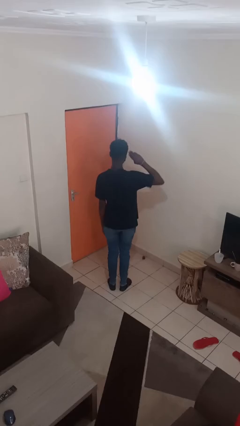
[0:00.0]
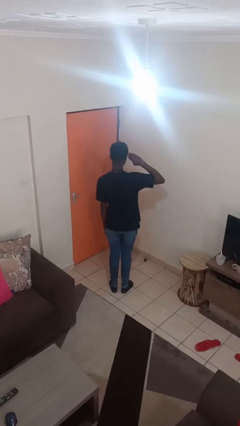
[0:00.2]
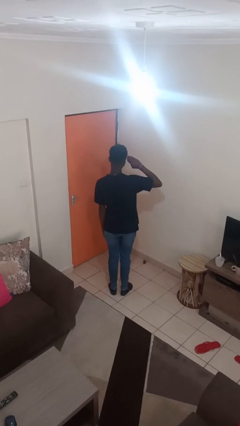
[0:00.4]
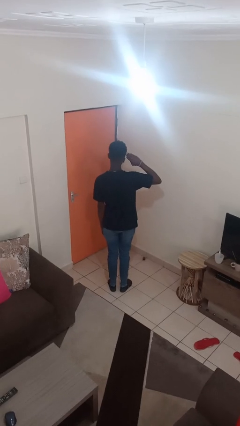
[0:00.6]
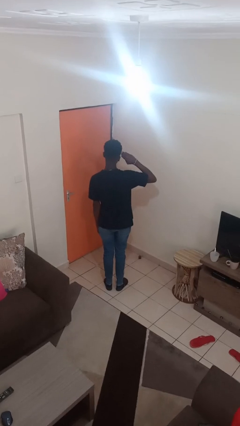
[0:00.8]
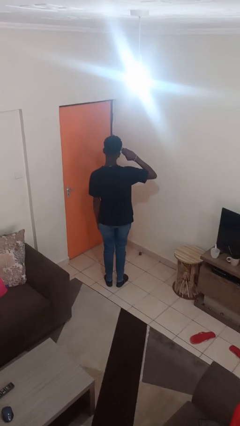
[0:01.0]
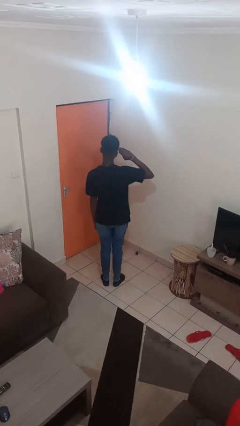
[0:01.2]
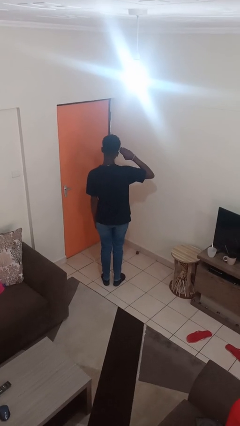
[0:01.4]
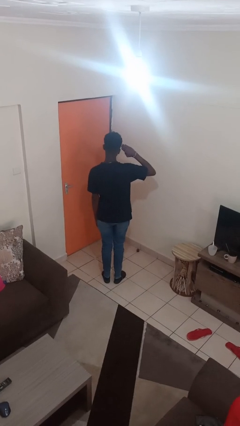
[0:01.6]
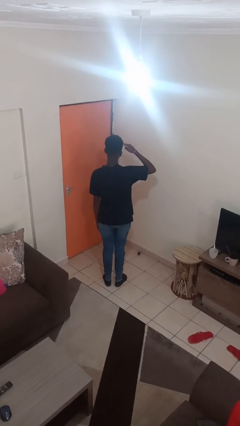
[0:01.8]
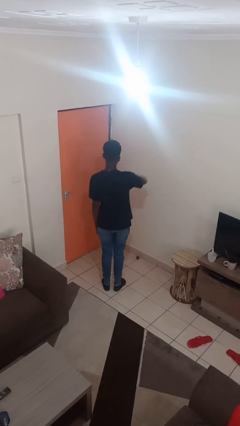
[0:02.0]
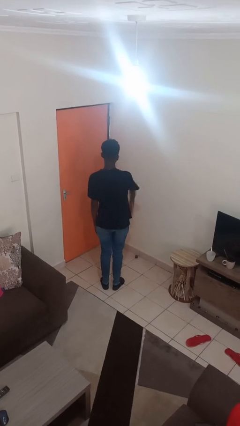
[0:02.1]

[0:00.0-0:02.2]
person salutes

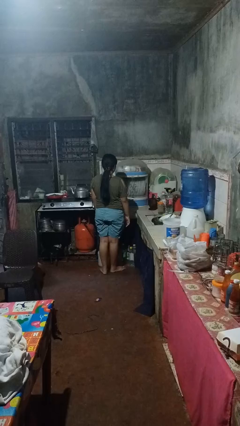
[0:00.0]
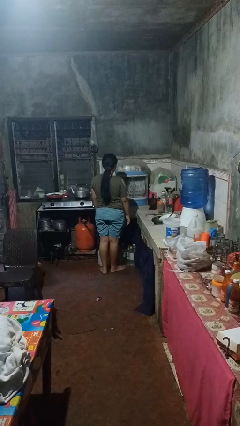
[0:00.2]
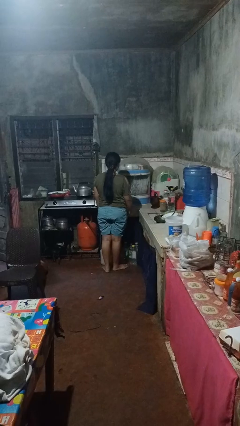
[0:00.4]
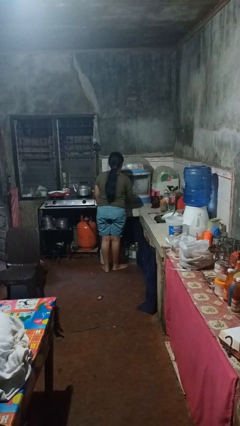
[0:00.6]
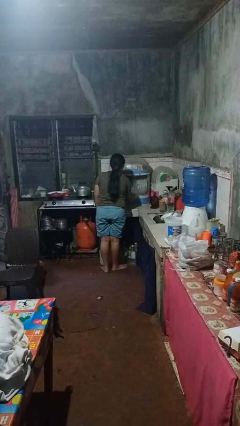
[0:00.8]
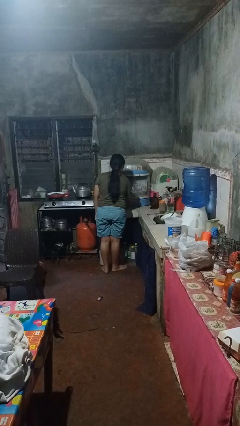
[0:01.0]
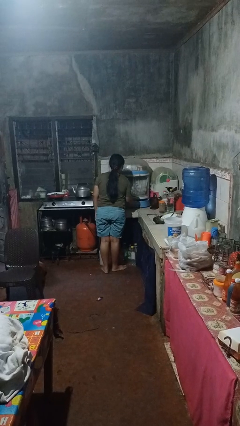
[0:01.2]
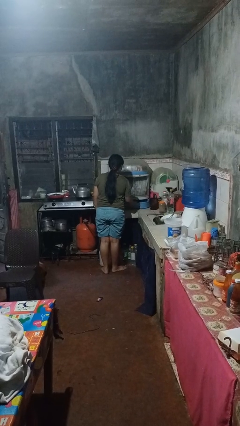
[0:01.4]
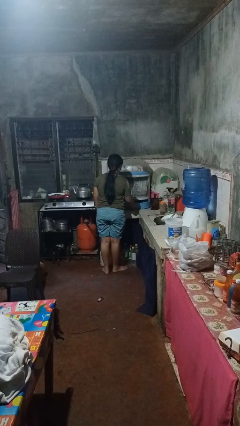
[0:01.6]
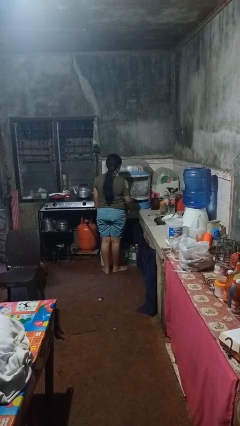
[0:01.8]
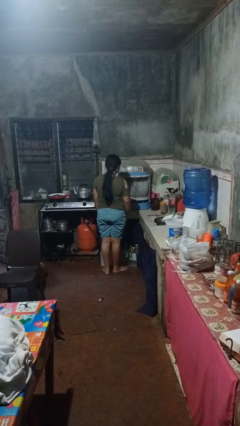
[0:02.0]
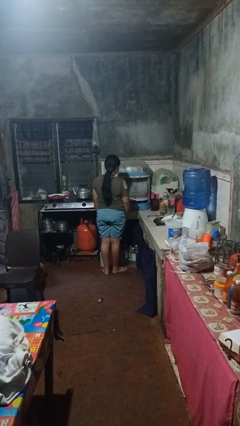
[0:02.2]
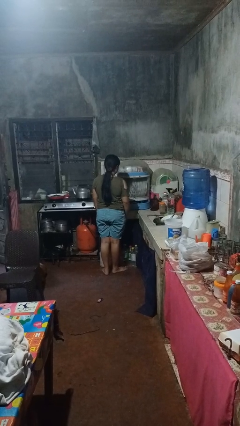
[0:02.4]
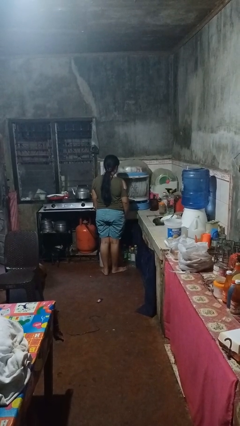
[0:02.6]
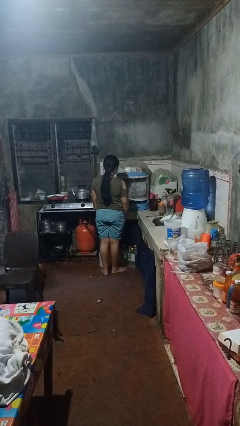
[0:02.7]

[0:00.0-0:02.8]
person opens kitchen drawer

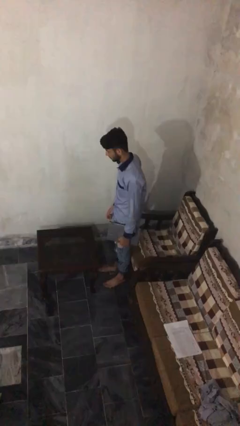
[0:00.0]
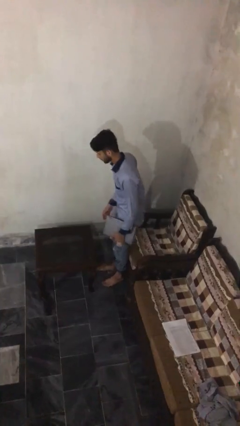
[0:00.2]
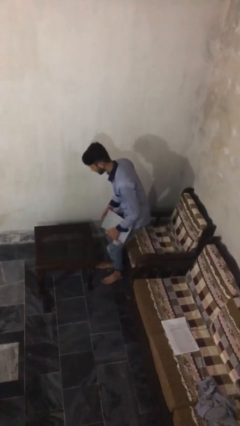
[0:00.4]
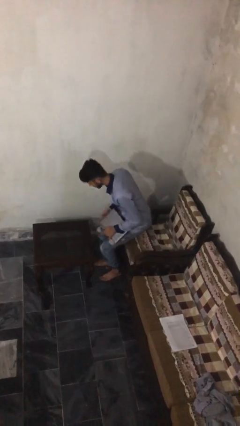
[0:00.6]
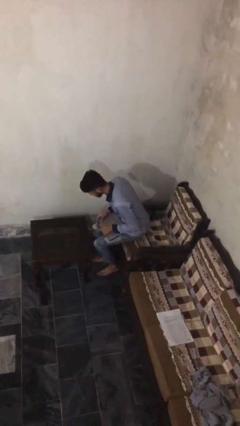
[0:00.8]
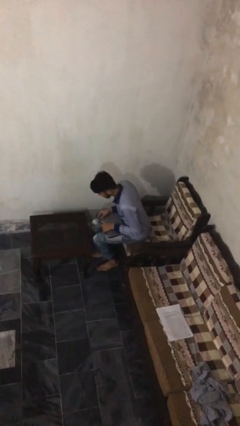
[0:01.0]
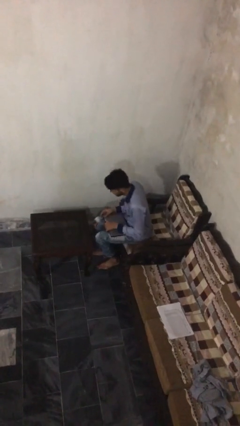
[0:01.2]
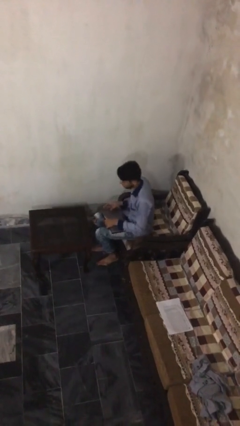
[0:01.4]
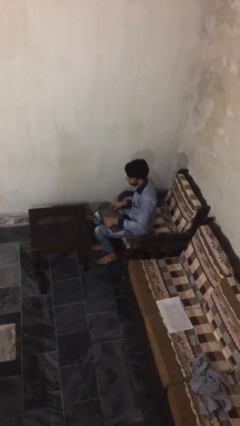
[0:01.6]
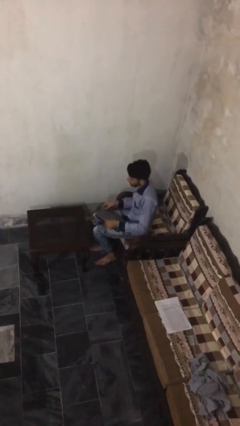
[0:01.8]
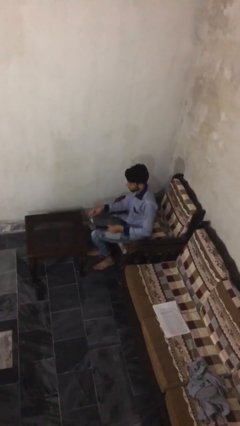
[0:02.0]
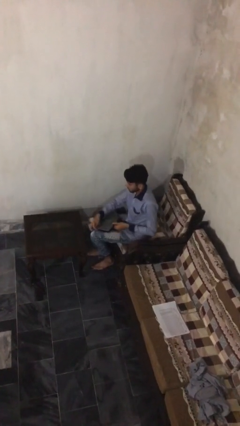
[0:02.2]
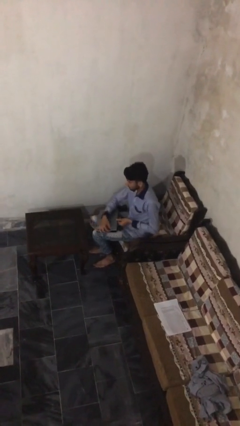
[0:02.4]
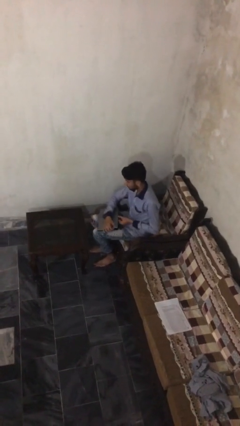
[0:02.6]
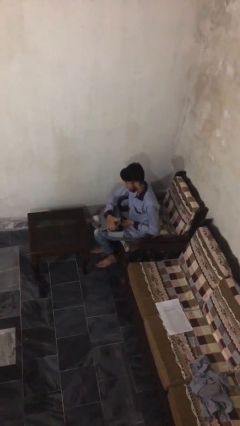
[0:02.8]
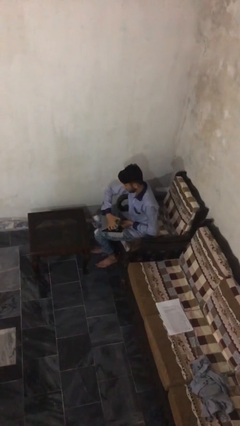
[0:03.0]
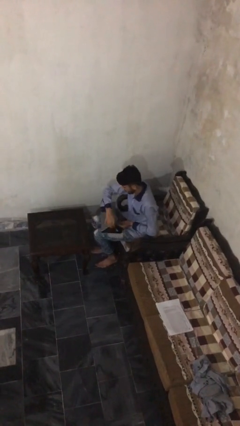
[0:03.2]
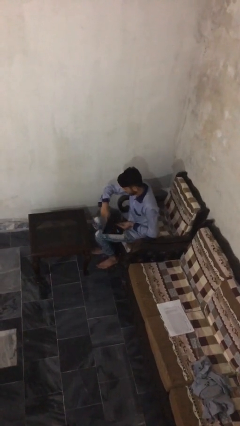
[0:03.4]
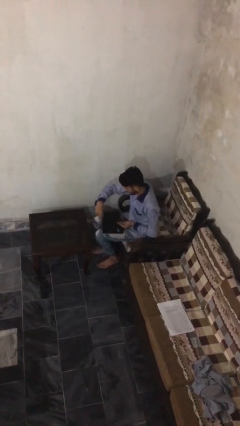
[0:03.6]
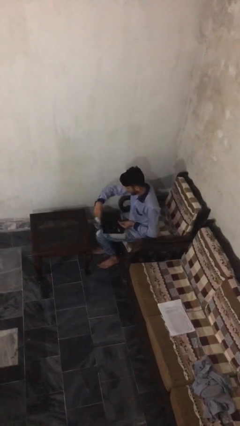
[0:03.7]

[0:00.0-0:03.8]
person sits down

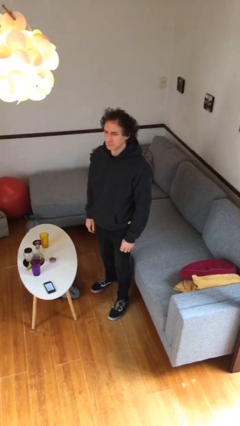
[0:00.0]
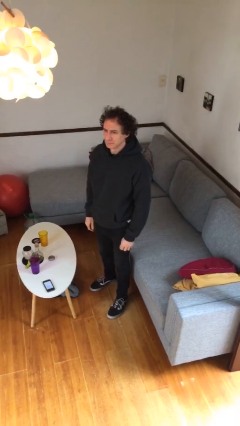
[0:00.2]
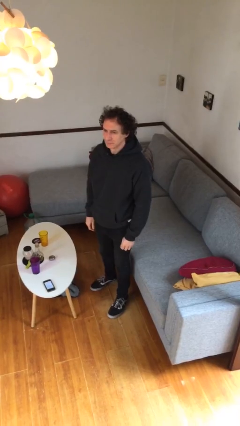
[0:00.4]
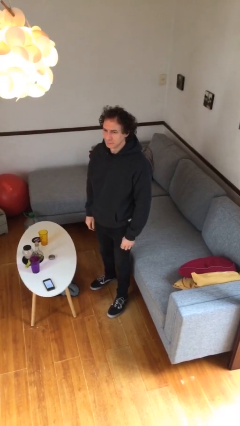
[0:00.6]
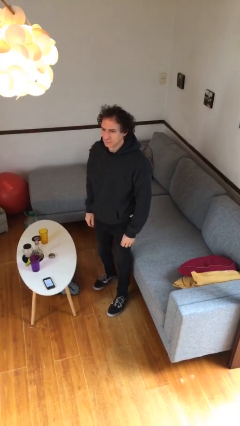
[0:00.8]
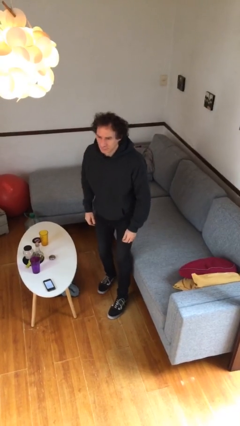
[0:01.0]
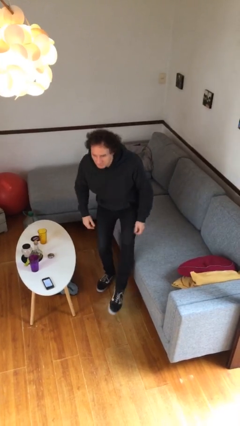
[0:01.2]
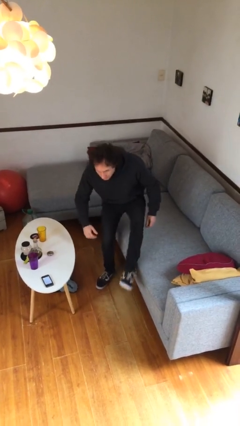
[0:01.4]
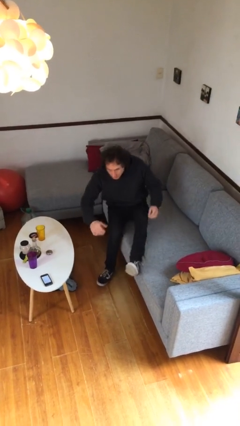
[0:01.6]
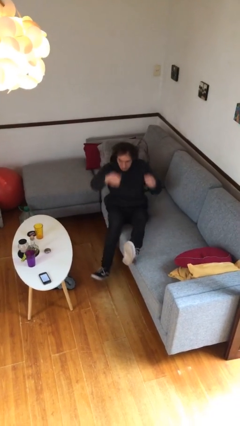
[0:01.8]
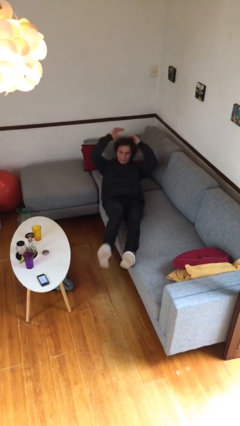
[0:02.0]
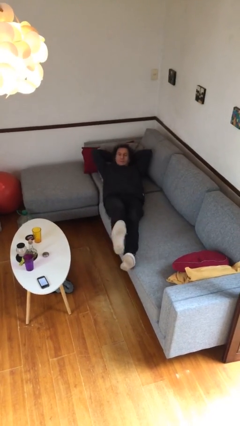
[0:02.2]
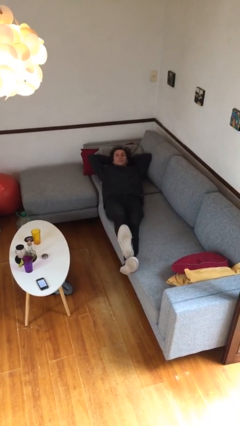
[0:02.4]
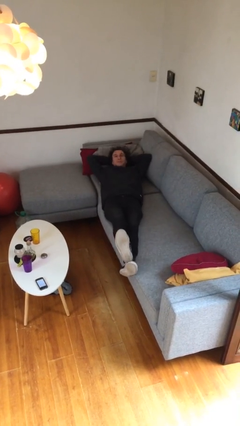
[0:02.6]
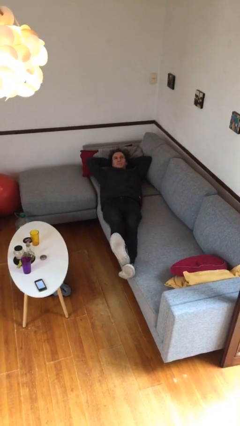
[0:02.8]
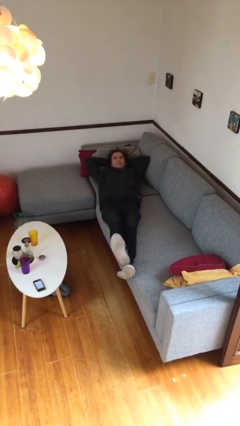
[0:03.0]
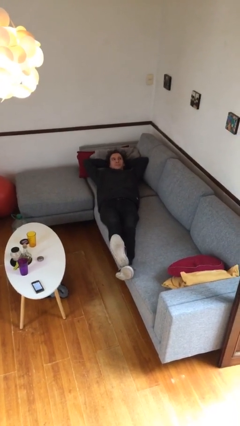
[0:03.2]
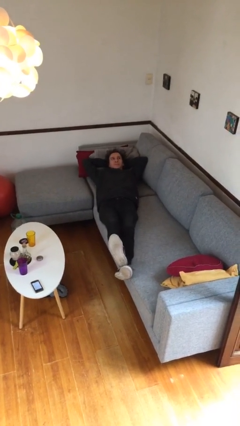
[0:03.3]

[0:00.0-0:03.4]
person lies down on couch

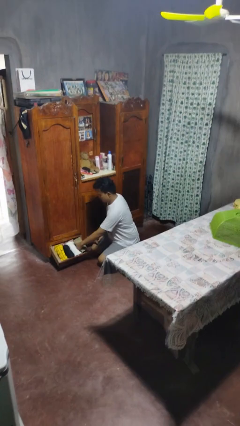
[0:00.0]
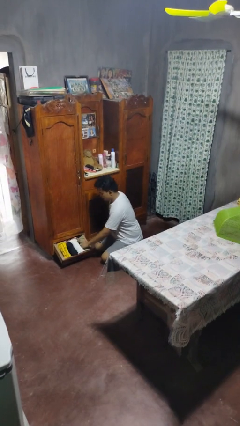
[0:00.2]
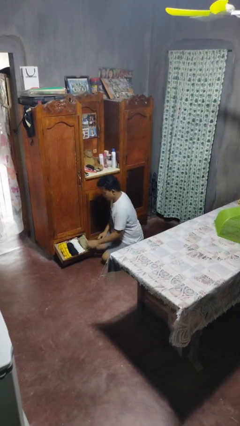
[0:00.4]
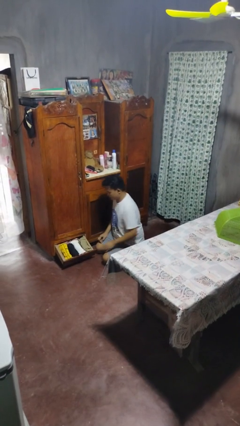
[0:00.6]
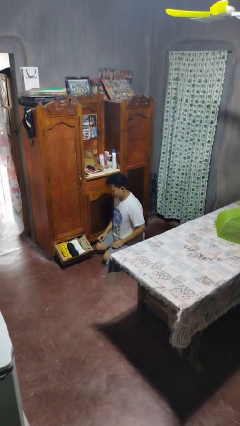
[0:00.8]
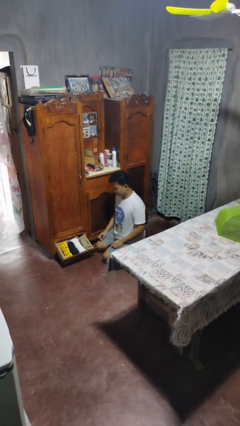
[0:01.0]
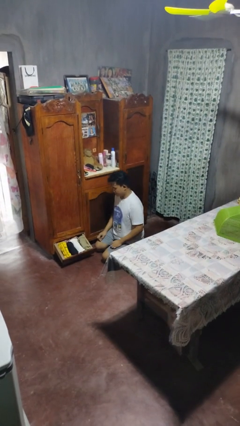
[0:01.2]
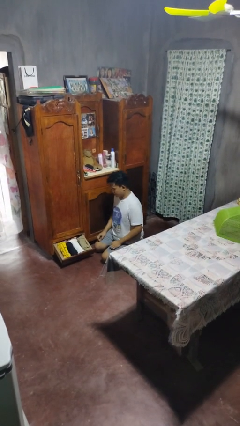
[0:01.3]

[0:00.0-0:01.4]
person puts clothes into dresser

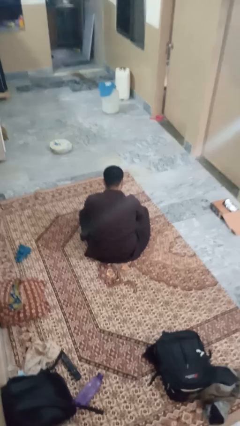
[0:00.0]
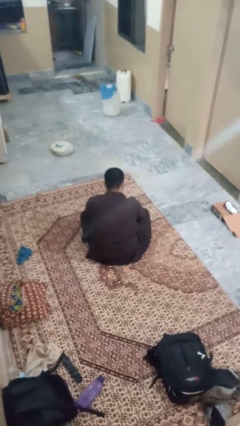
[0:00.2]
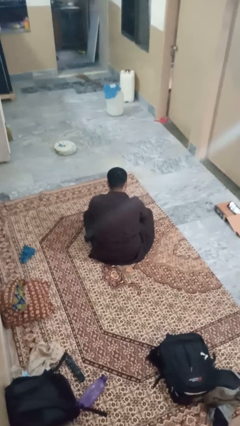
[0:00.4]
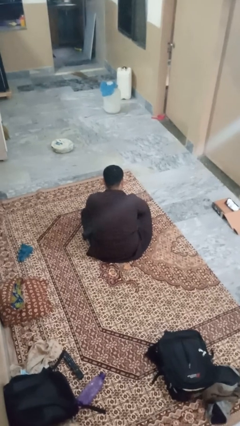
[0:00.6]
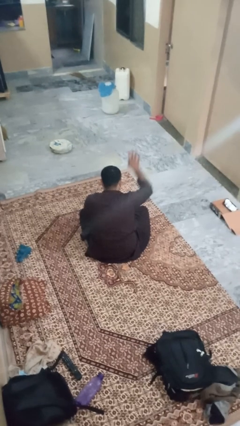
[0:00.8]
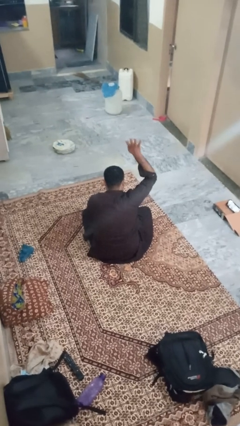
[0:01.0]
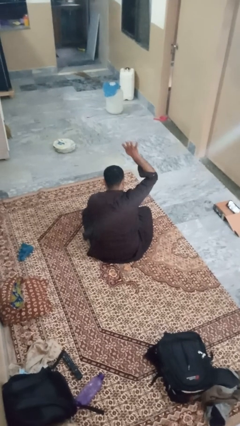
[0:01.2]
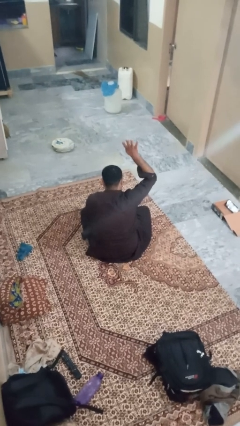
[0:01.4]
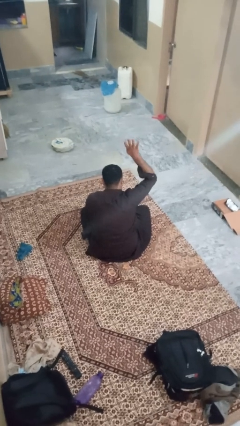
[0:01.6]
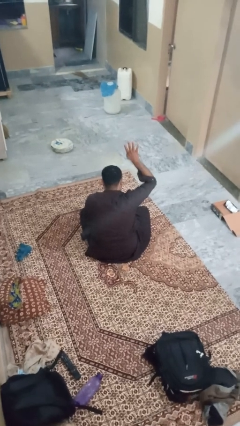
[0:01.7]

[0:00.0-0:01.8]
person gestures number four

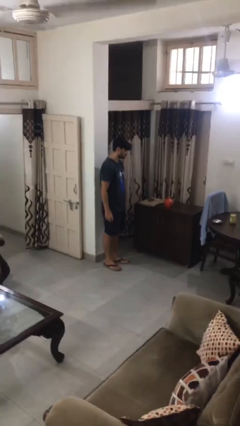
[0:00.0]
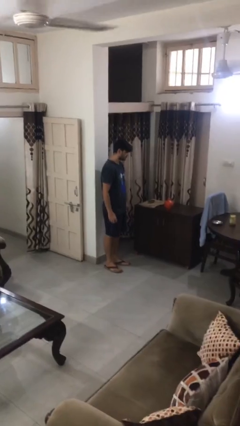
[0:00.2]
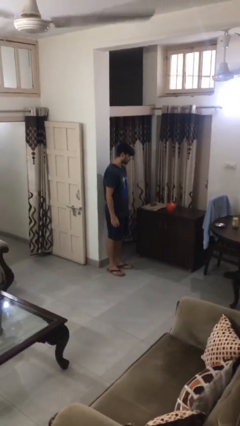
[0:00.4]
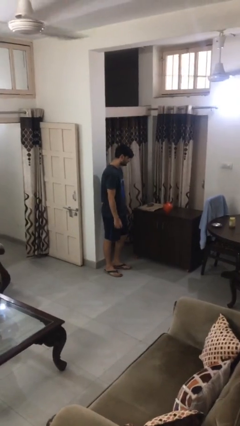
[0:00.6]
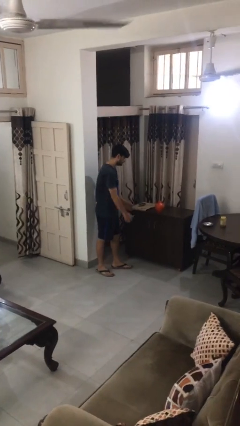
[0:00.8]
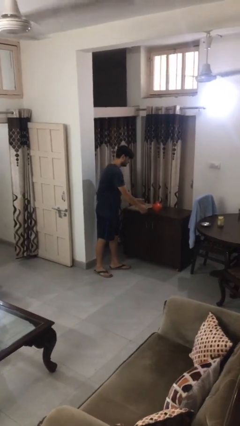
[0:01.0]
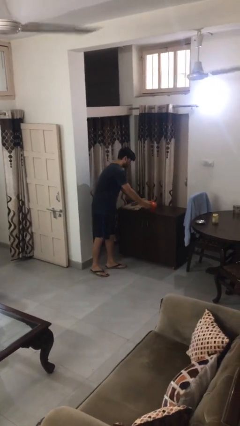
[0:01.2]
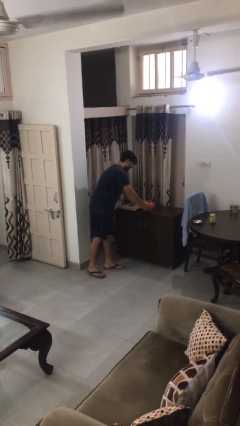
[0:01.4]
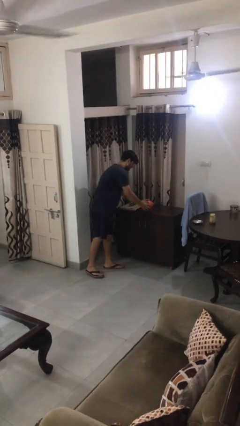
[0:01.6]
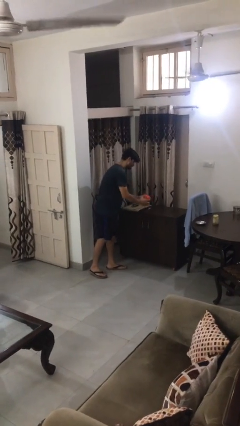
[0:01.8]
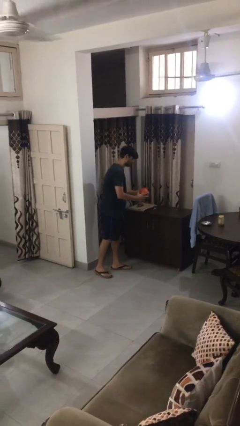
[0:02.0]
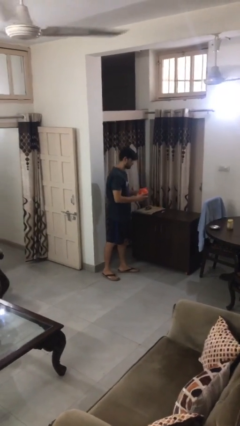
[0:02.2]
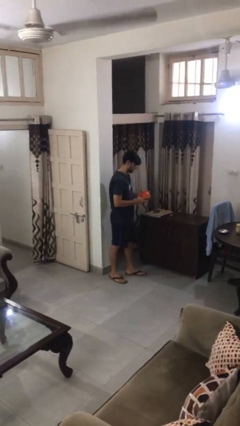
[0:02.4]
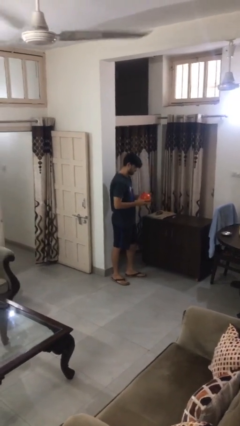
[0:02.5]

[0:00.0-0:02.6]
person picks up object from countertop
